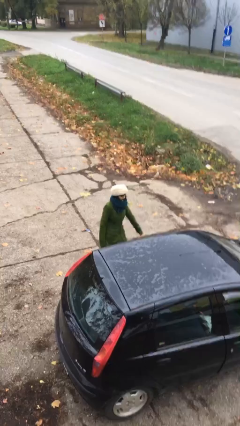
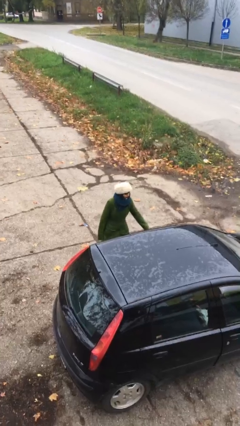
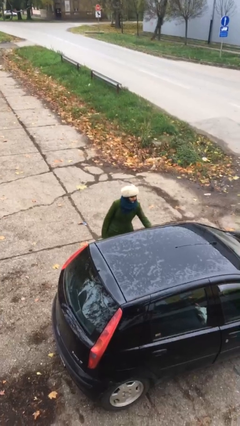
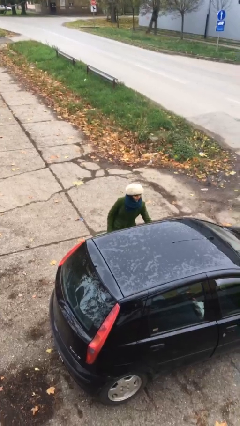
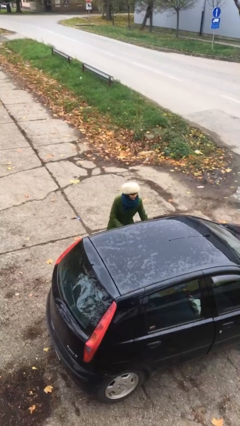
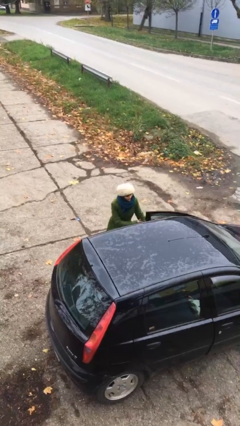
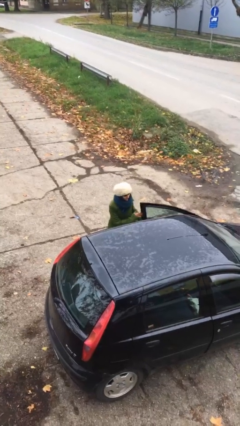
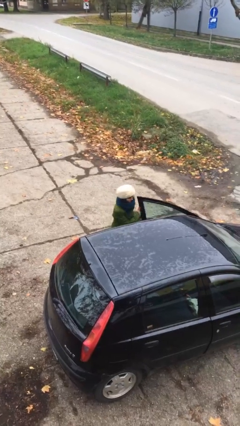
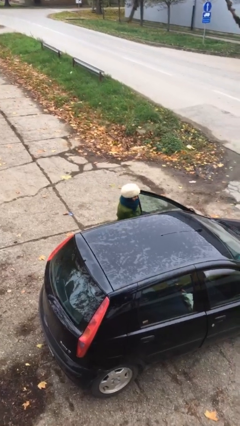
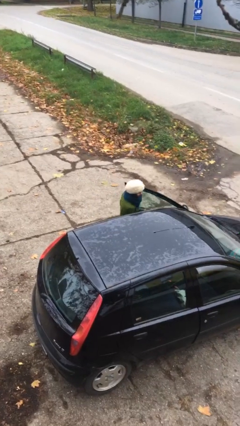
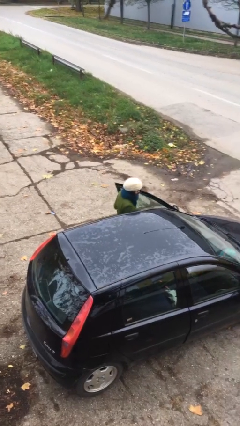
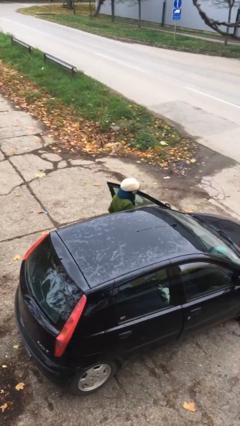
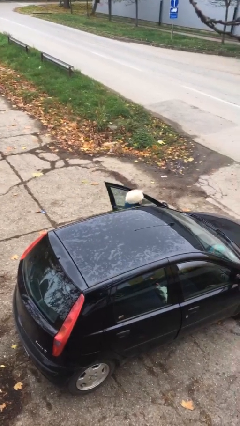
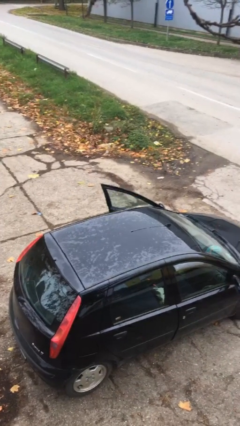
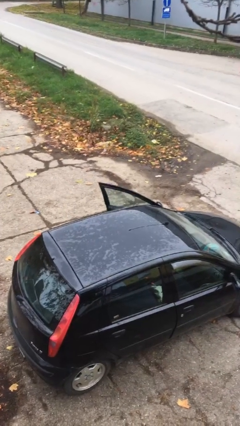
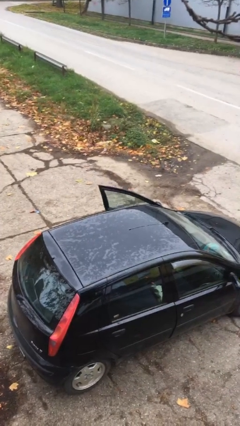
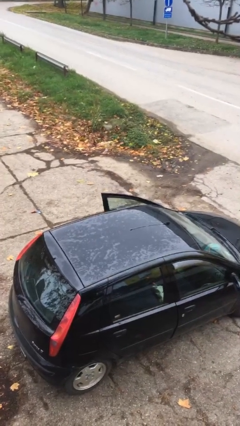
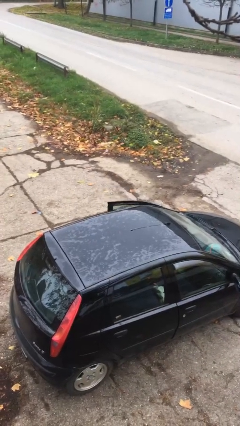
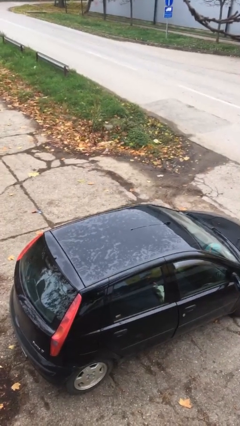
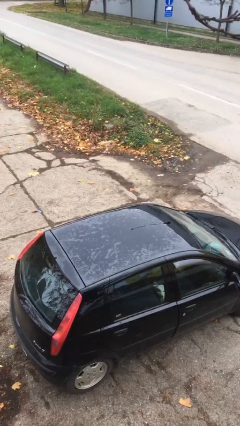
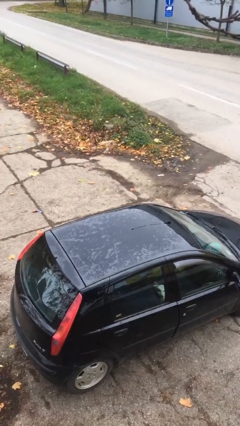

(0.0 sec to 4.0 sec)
person enters car

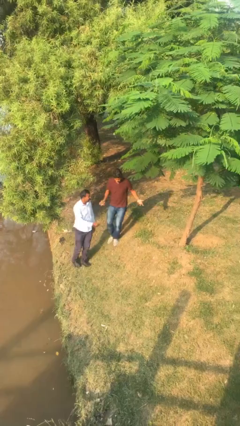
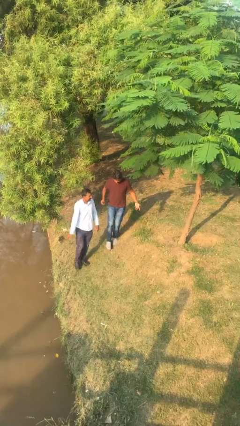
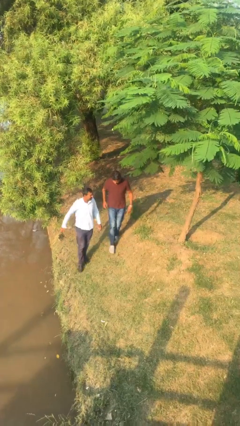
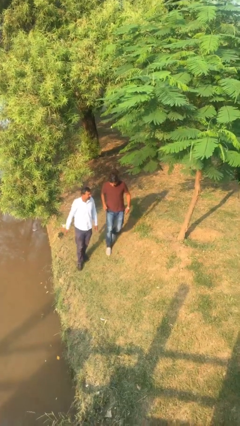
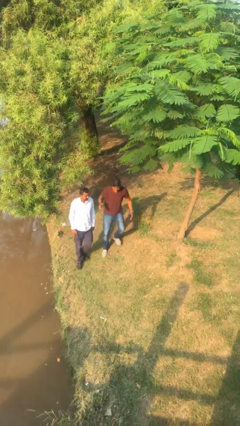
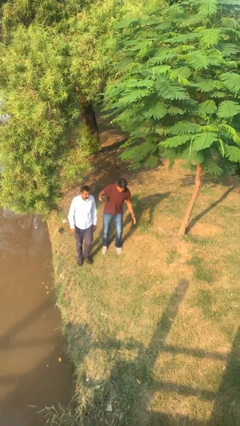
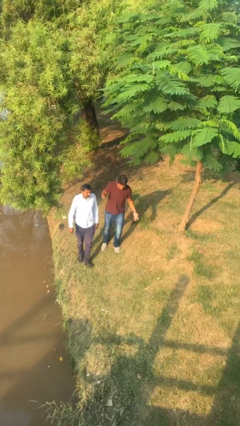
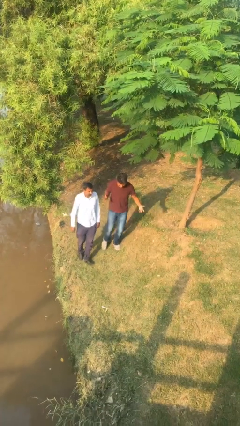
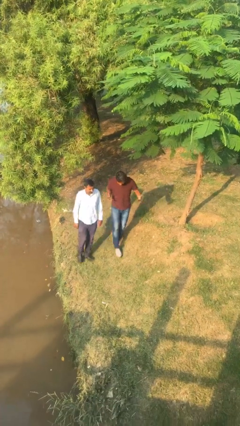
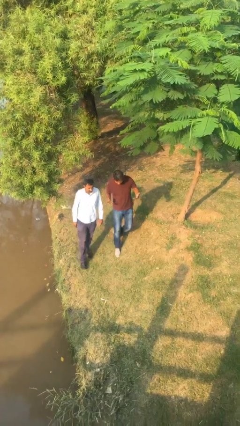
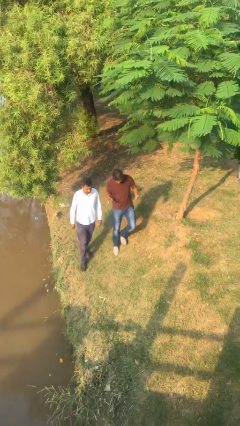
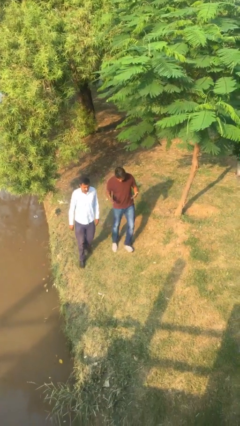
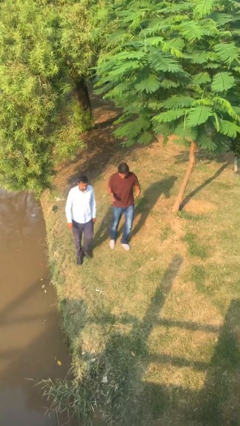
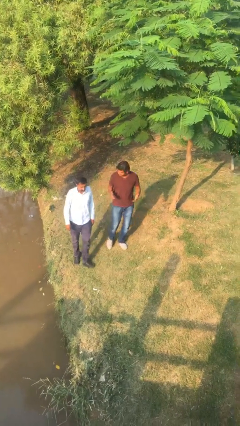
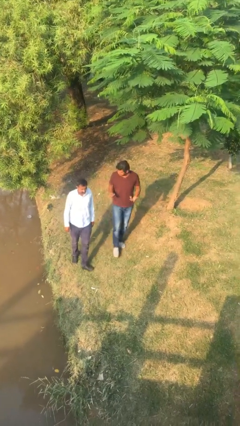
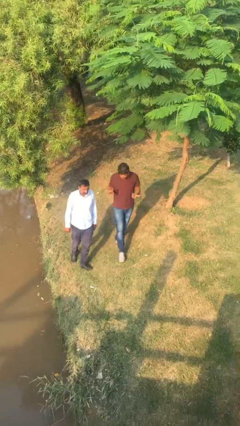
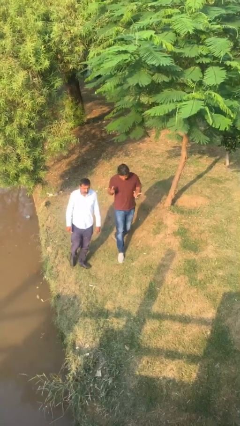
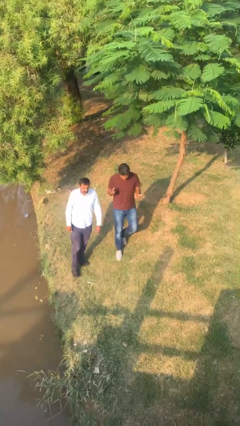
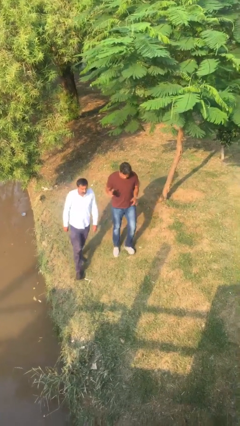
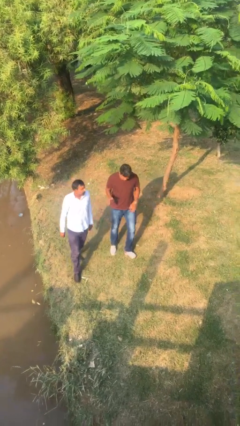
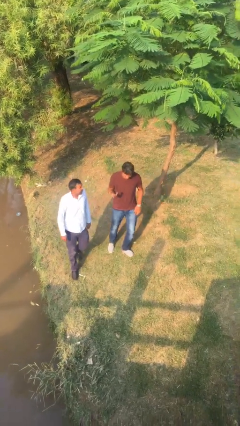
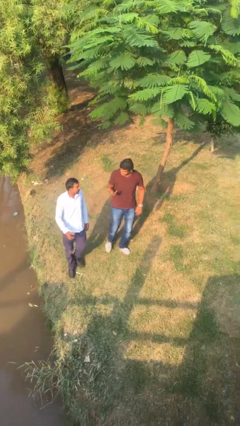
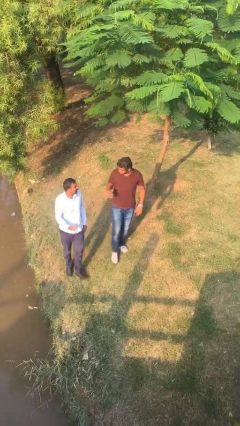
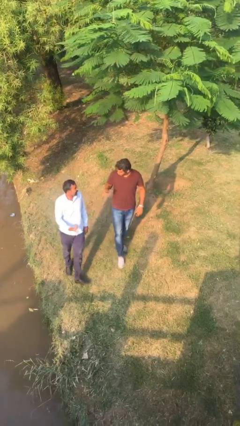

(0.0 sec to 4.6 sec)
person talks to person

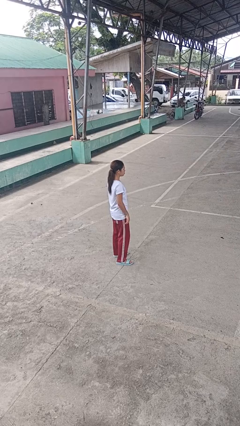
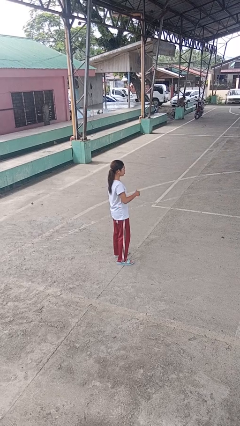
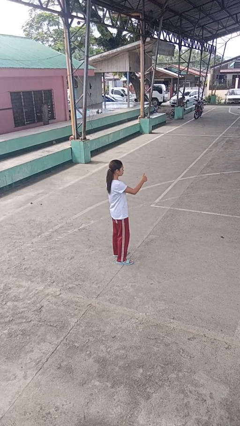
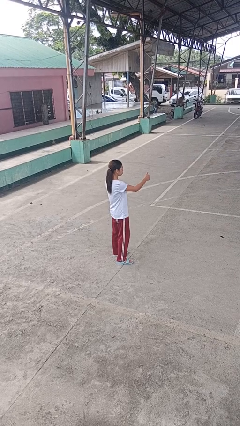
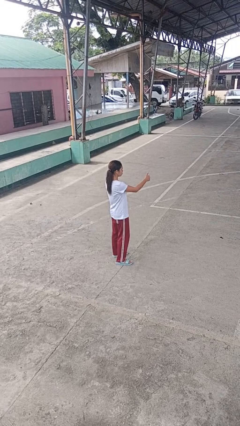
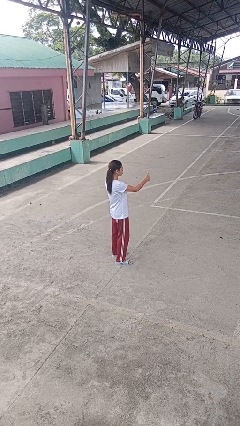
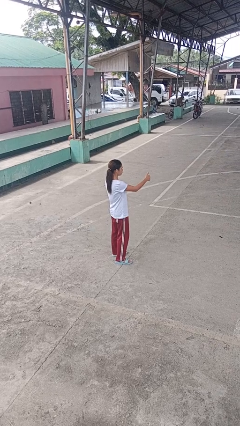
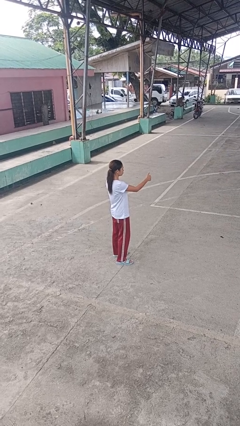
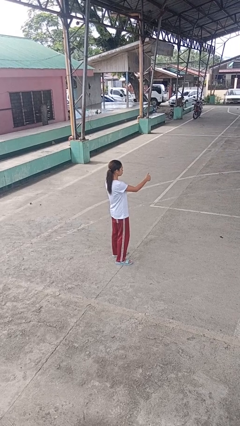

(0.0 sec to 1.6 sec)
person gestures thumbs up

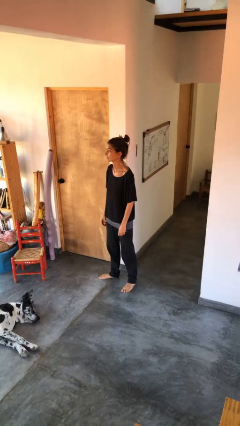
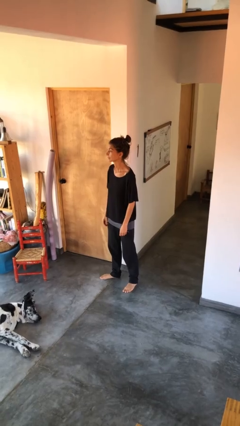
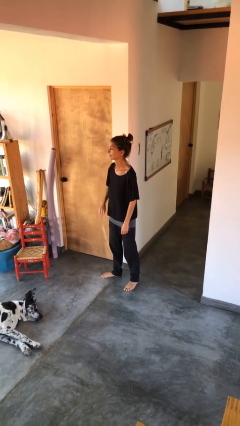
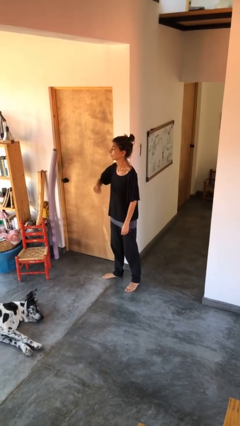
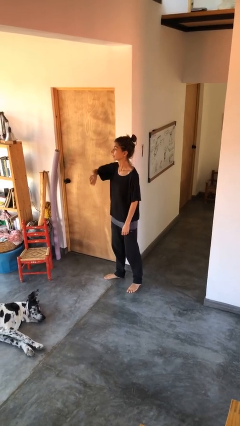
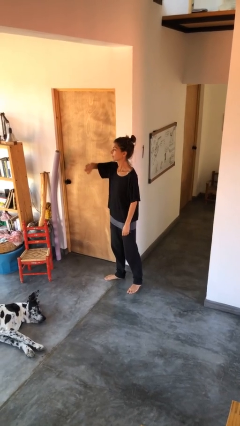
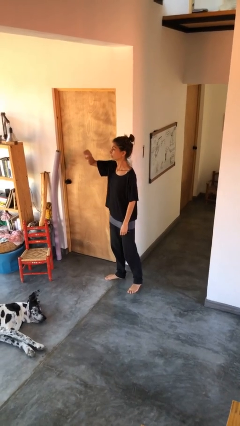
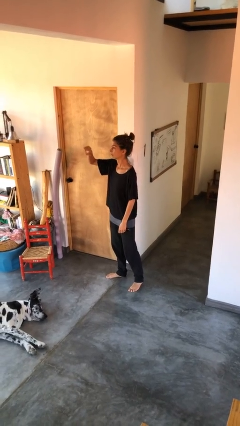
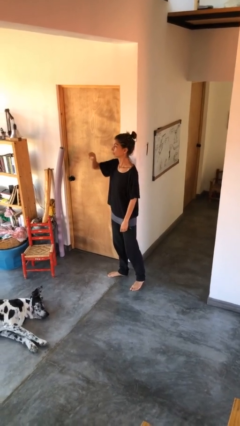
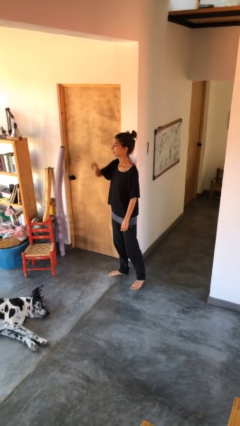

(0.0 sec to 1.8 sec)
person gestures swipe up

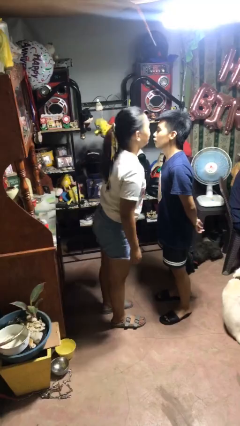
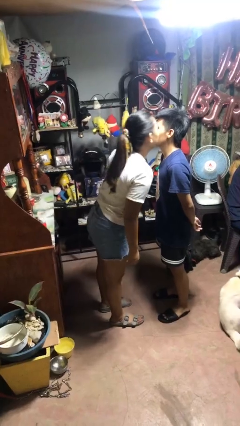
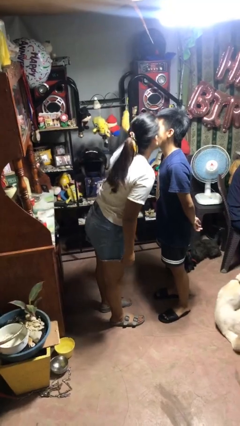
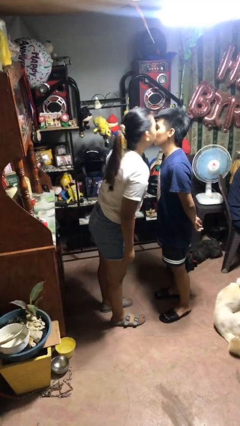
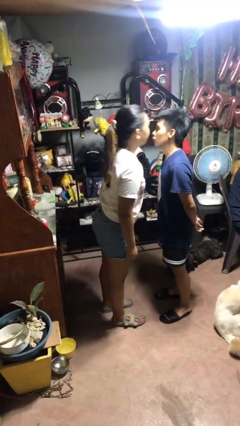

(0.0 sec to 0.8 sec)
person kisses cheek of person

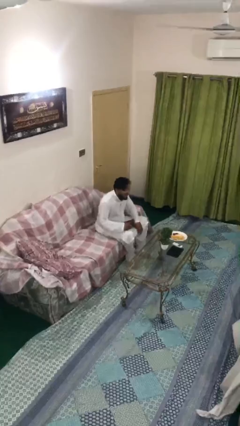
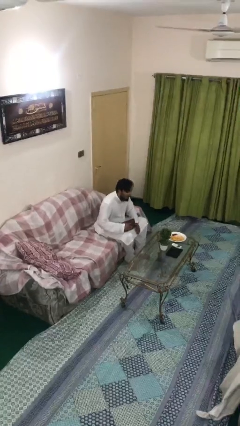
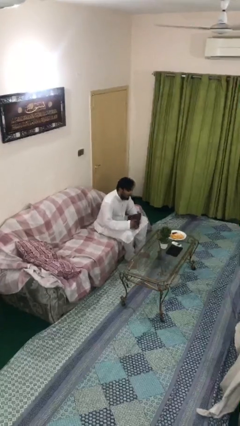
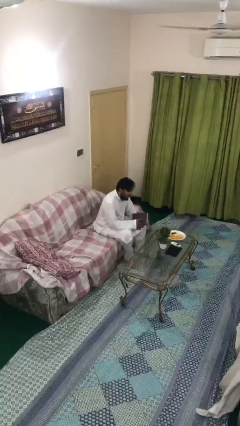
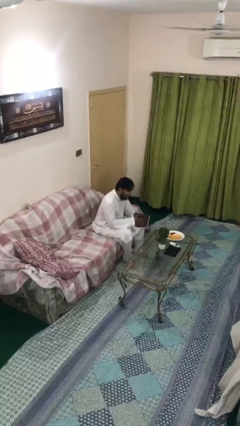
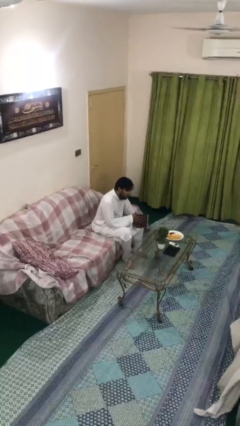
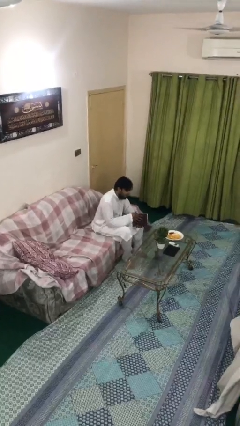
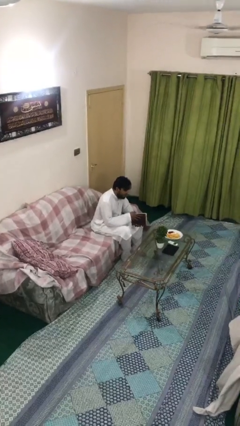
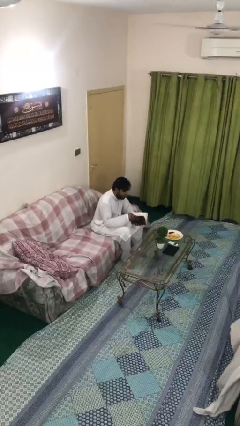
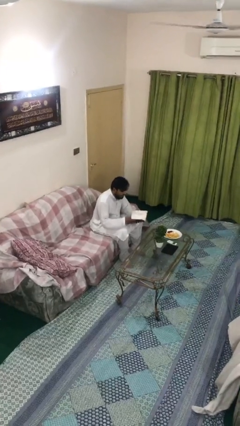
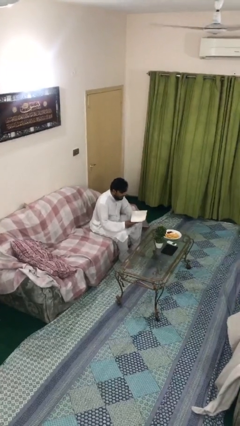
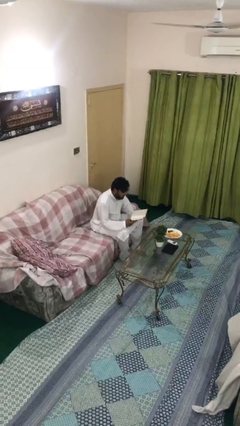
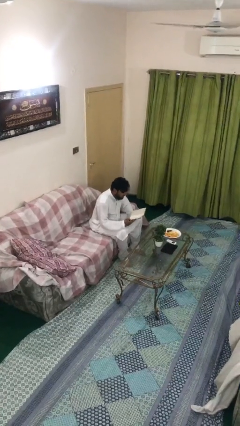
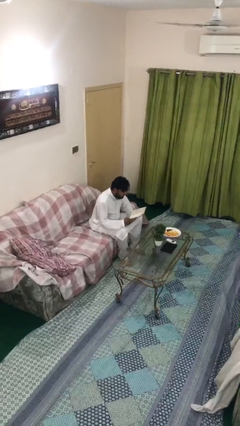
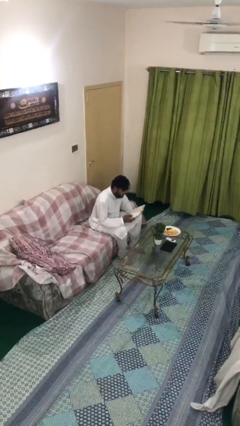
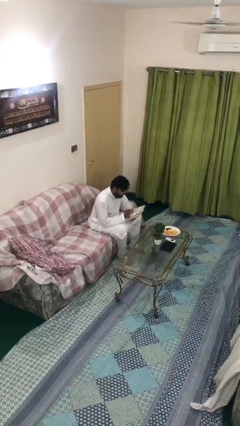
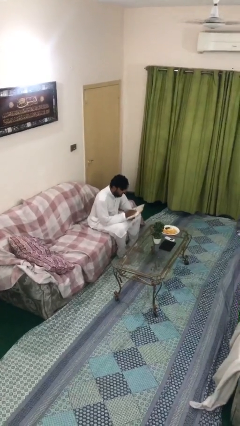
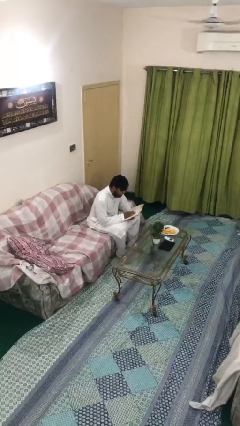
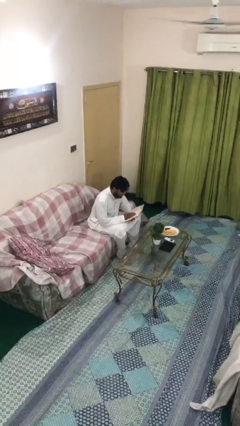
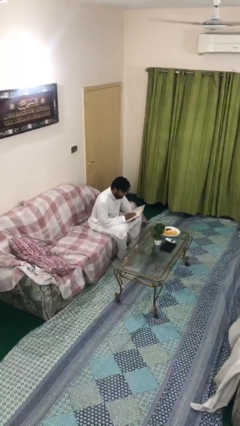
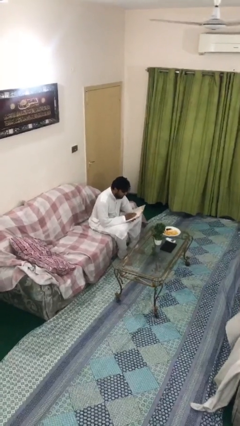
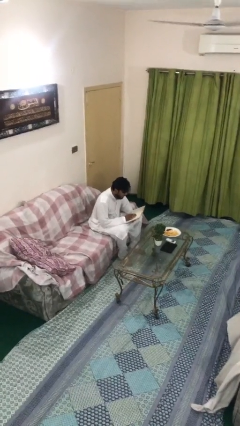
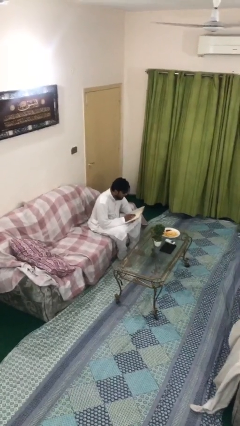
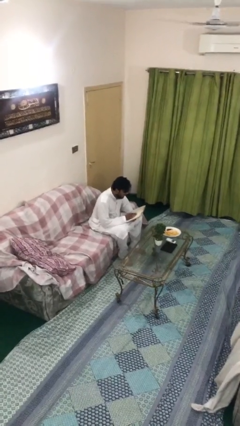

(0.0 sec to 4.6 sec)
person reads document

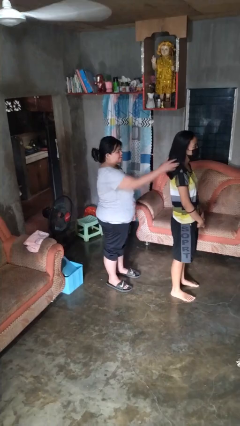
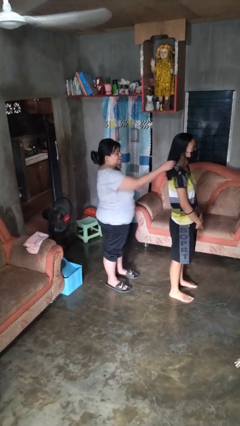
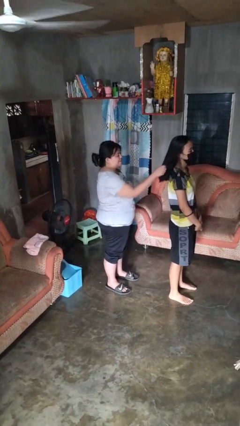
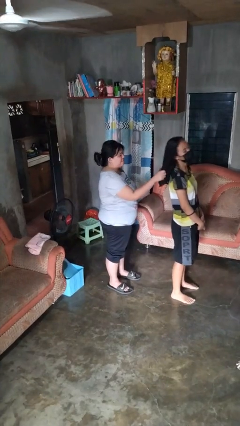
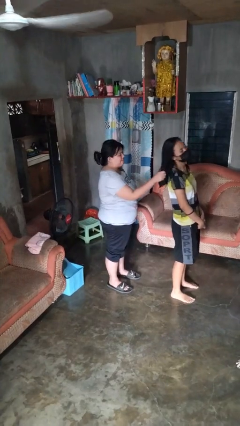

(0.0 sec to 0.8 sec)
person grabs person by hair
